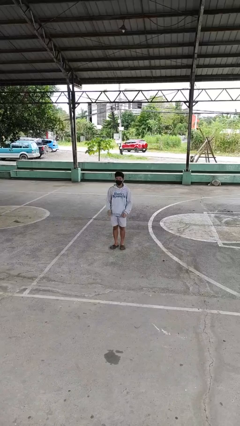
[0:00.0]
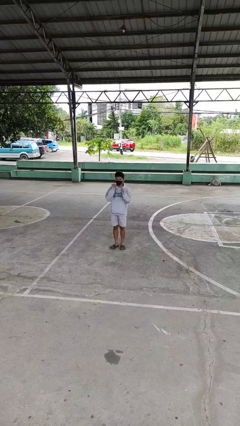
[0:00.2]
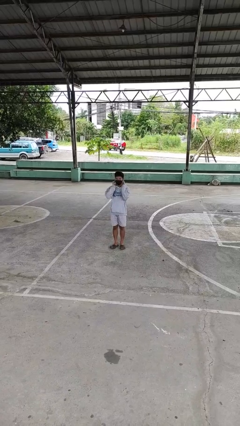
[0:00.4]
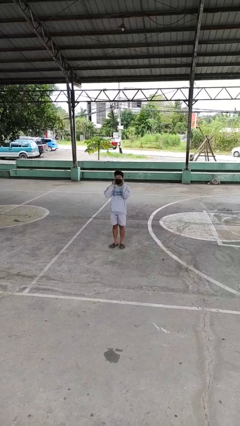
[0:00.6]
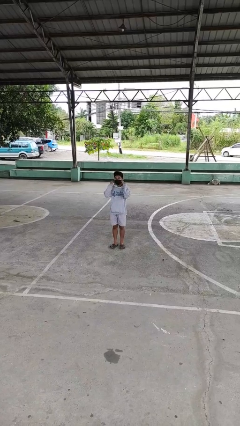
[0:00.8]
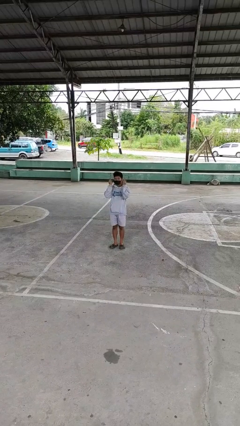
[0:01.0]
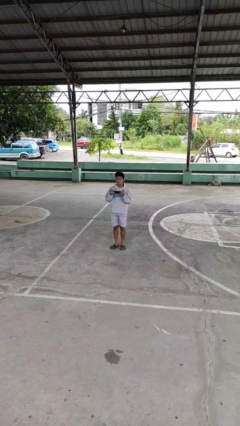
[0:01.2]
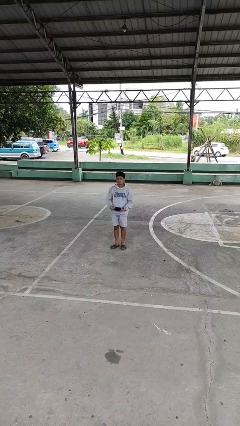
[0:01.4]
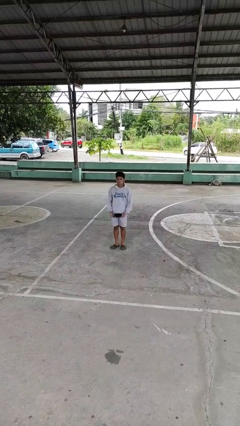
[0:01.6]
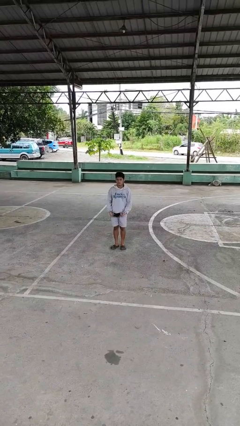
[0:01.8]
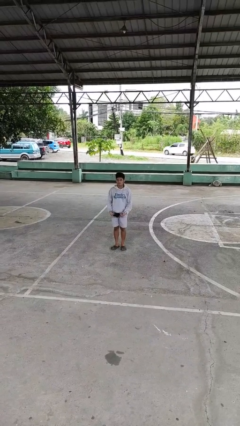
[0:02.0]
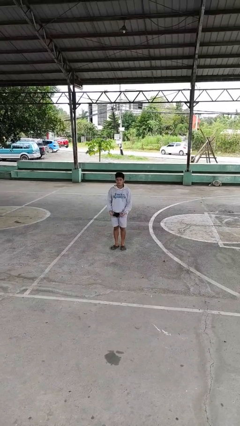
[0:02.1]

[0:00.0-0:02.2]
person takes off facemask

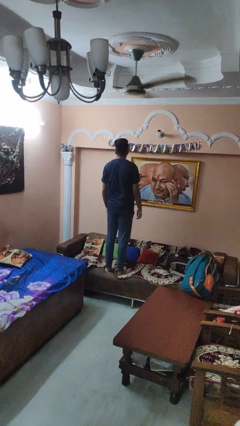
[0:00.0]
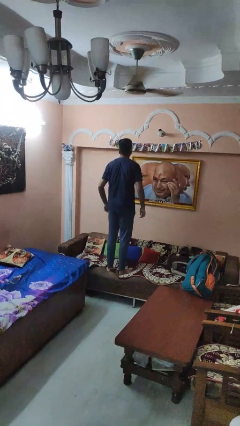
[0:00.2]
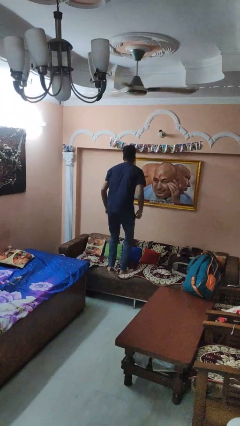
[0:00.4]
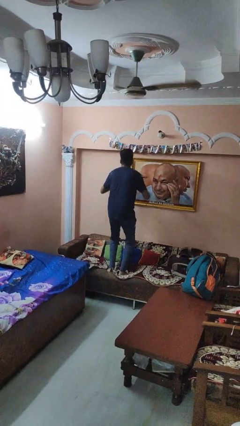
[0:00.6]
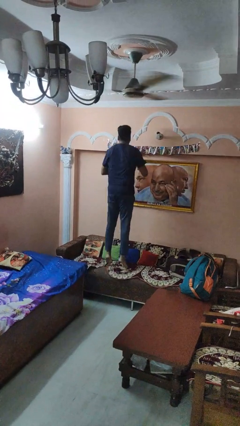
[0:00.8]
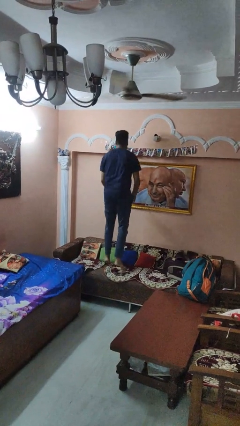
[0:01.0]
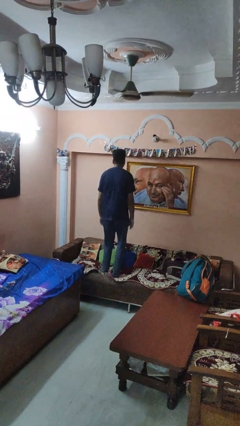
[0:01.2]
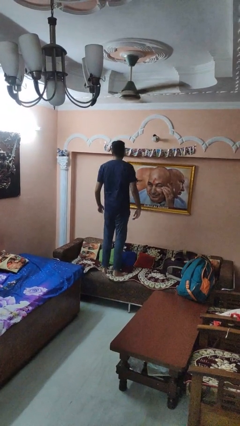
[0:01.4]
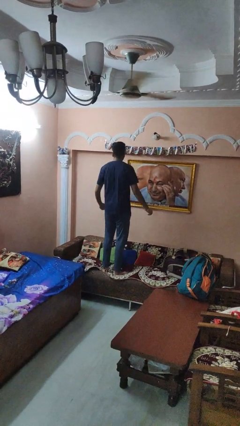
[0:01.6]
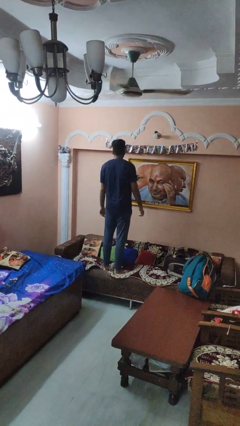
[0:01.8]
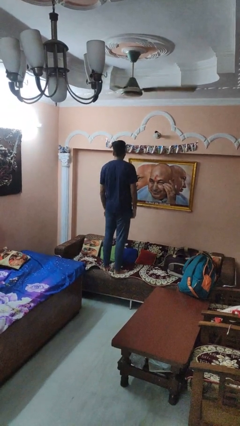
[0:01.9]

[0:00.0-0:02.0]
person jumps on couch

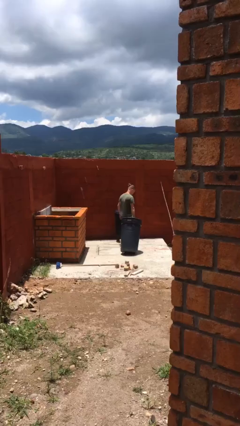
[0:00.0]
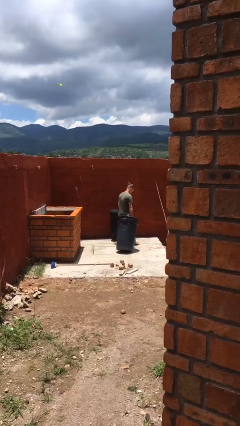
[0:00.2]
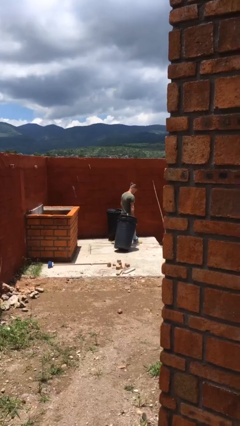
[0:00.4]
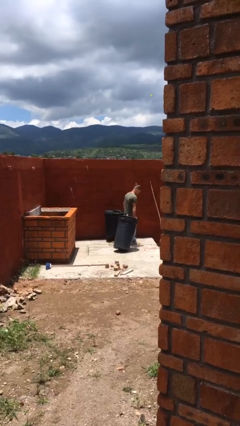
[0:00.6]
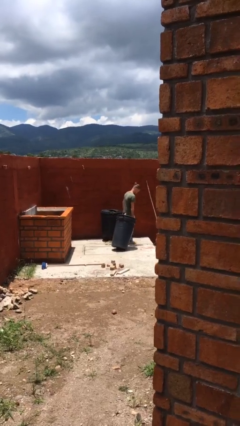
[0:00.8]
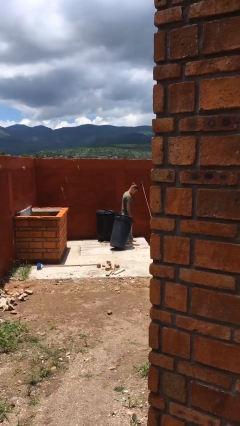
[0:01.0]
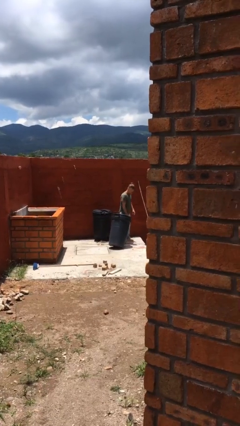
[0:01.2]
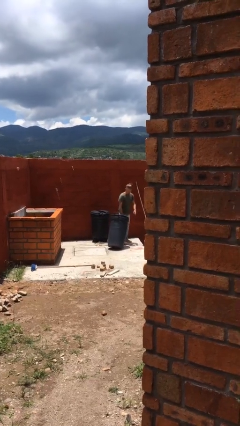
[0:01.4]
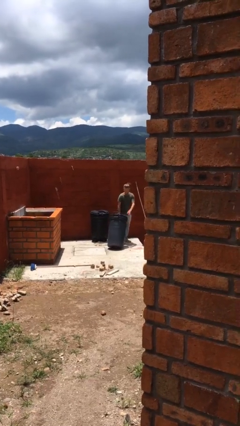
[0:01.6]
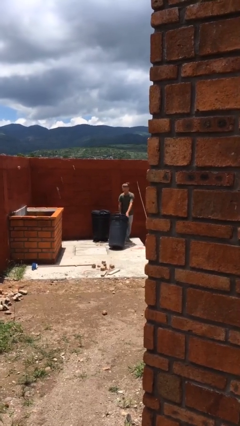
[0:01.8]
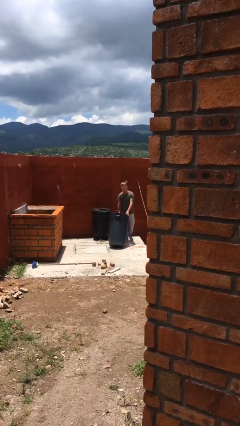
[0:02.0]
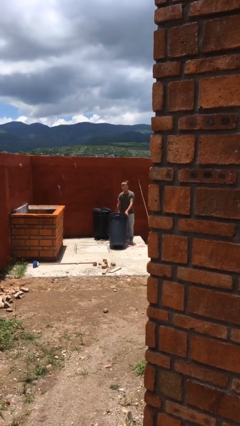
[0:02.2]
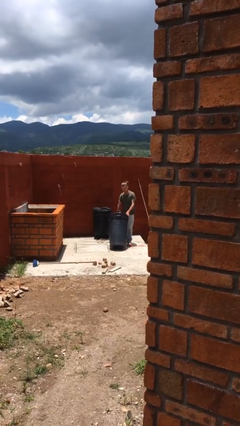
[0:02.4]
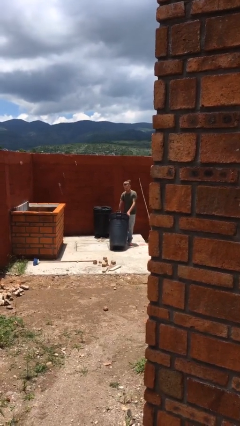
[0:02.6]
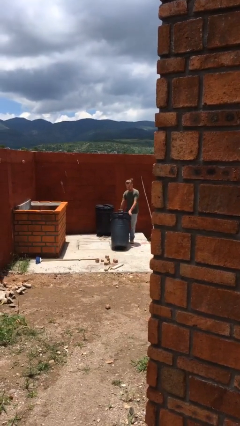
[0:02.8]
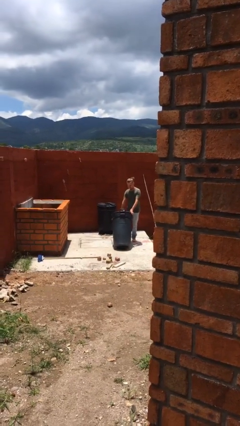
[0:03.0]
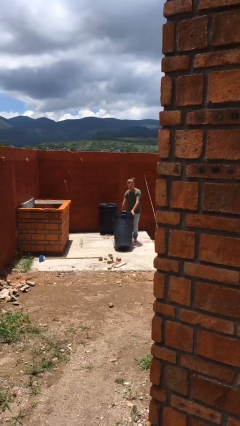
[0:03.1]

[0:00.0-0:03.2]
person pushes wheeled trashcan

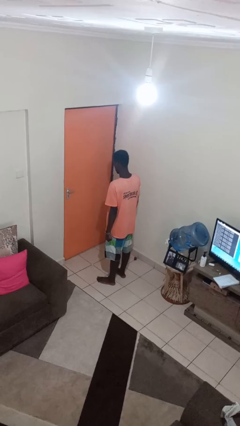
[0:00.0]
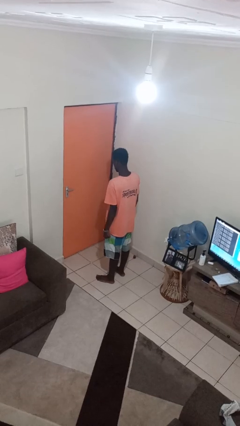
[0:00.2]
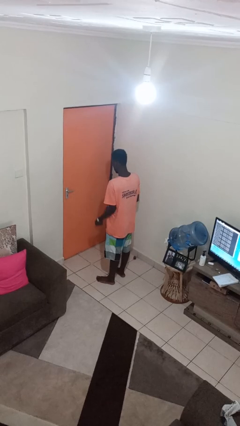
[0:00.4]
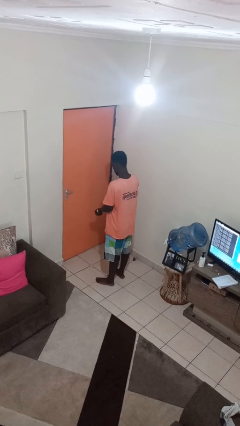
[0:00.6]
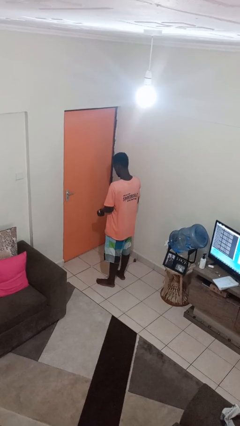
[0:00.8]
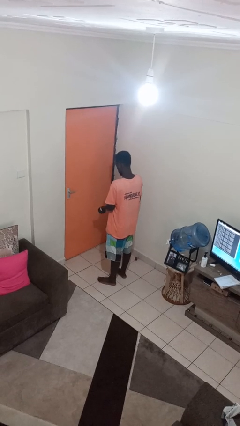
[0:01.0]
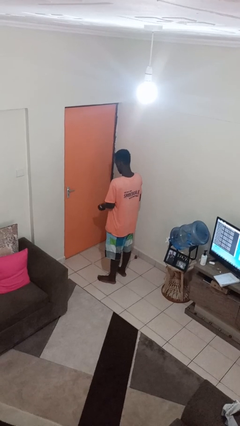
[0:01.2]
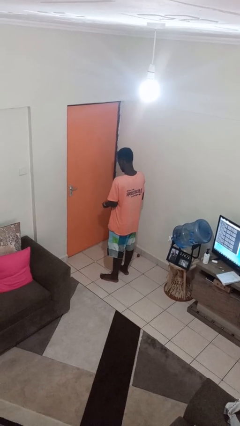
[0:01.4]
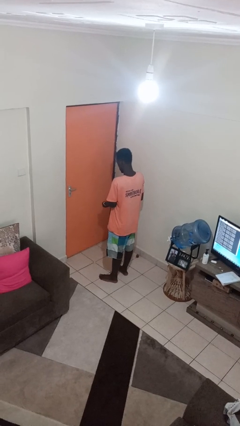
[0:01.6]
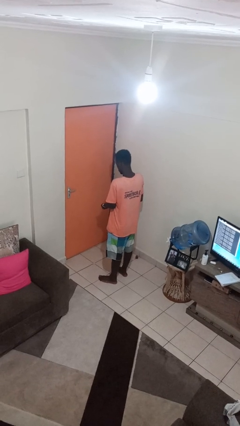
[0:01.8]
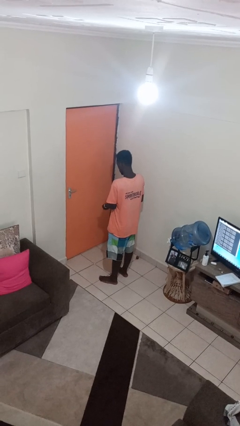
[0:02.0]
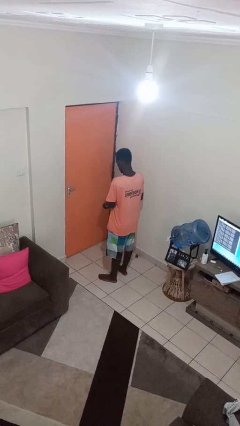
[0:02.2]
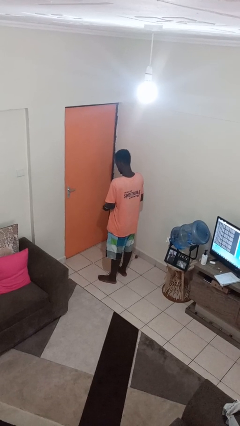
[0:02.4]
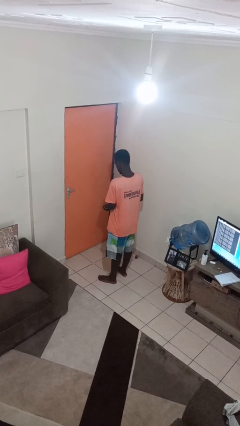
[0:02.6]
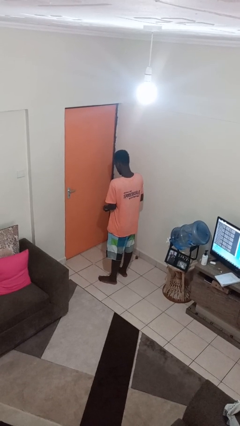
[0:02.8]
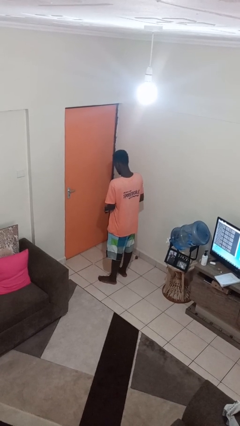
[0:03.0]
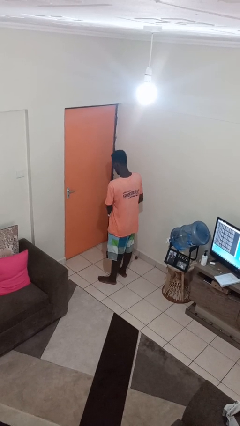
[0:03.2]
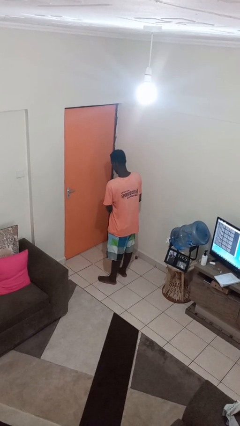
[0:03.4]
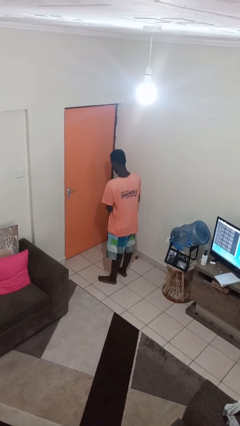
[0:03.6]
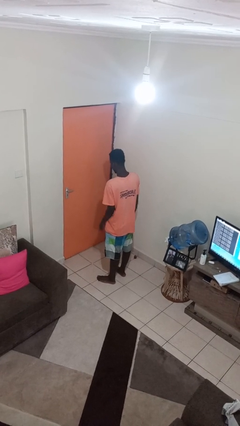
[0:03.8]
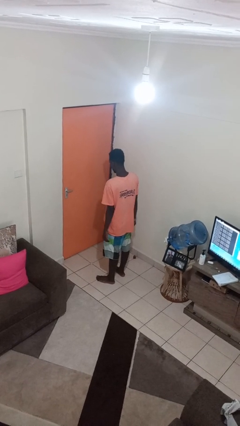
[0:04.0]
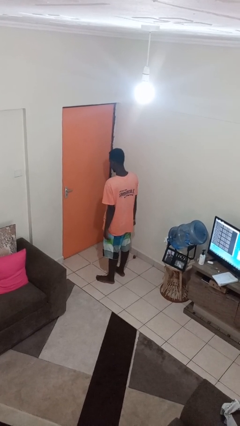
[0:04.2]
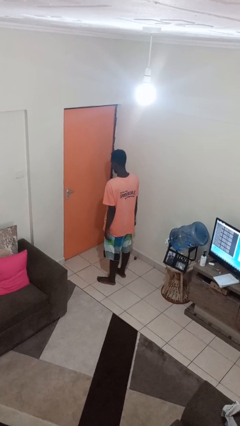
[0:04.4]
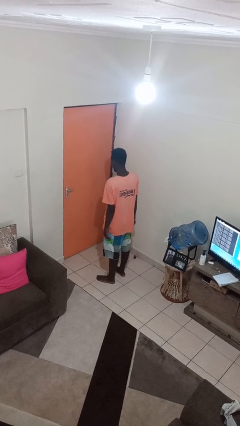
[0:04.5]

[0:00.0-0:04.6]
person takes off wristwatch

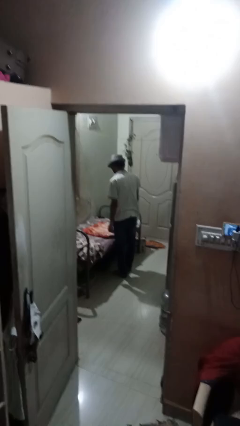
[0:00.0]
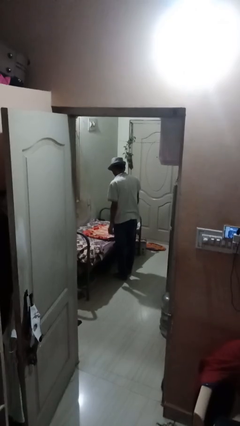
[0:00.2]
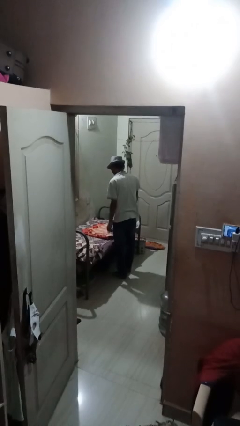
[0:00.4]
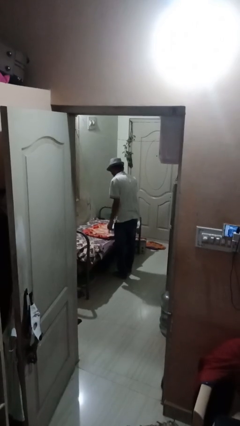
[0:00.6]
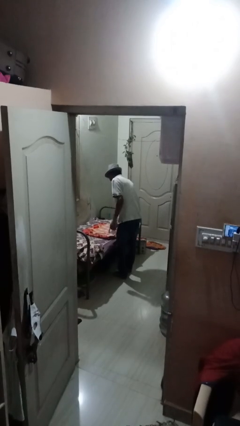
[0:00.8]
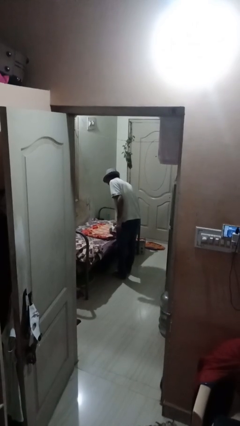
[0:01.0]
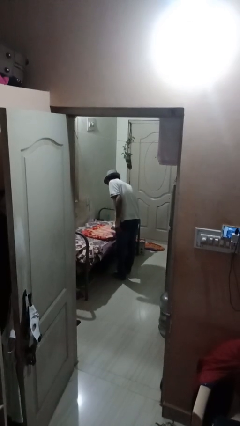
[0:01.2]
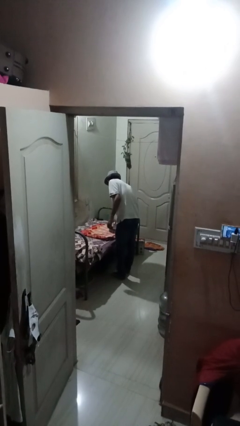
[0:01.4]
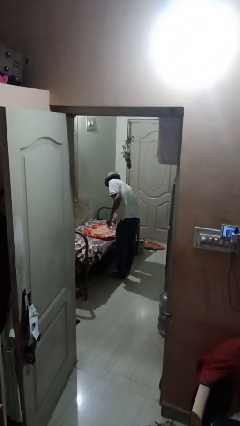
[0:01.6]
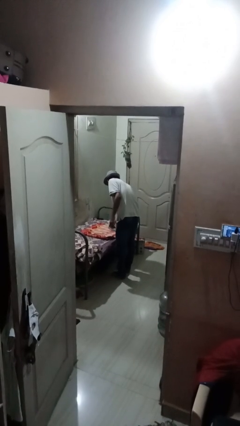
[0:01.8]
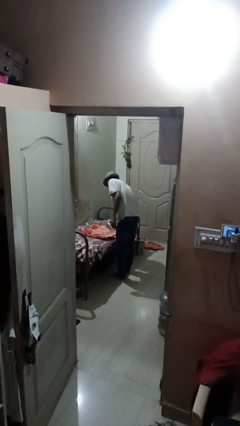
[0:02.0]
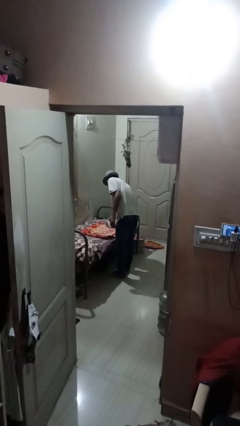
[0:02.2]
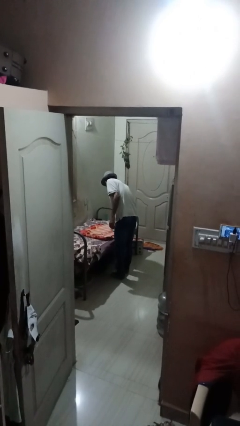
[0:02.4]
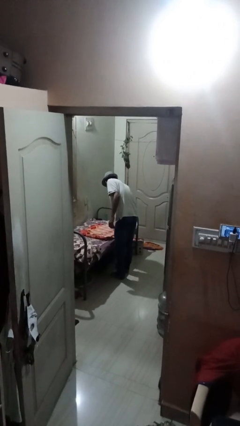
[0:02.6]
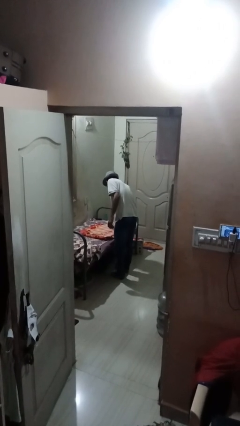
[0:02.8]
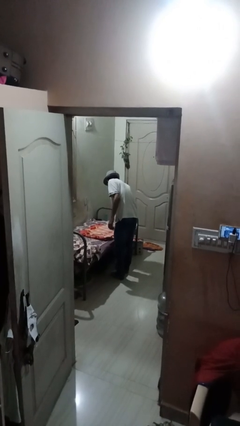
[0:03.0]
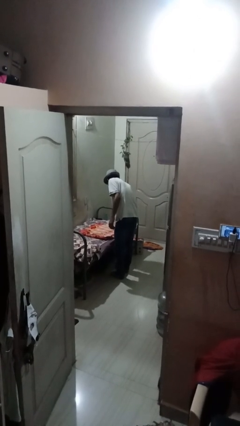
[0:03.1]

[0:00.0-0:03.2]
person irons clothes

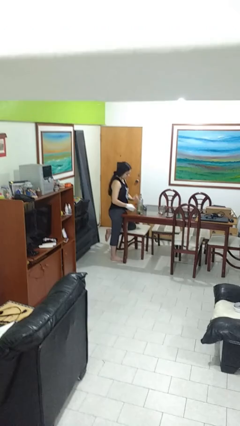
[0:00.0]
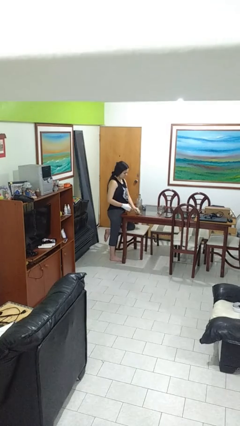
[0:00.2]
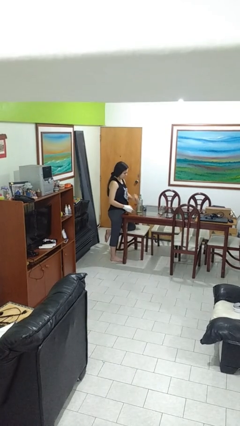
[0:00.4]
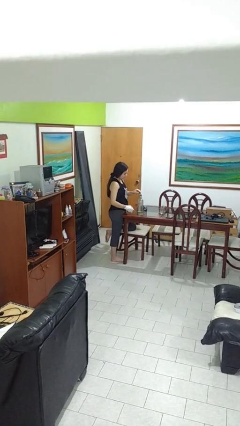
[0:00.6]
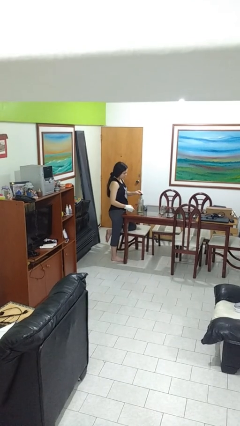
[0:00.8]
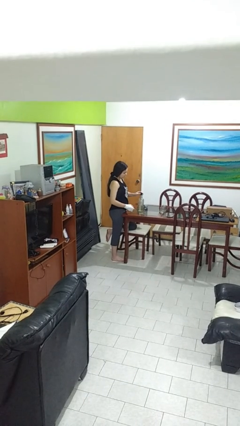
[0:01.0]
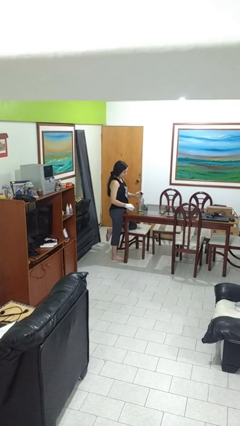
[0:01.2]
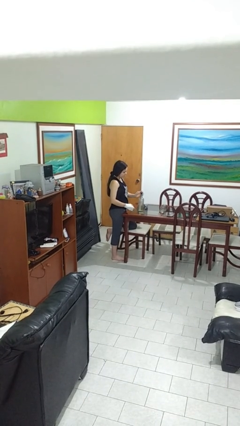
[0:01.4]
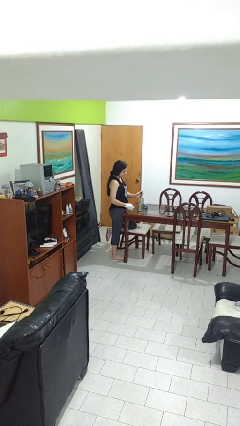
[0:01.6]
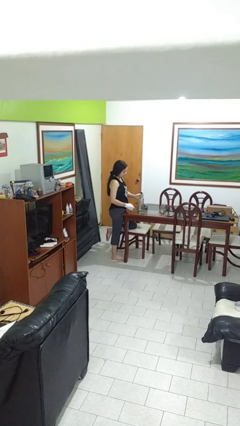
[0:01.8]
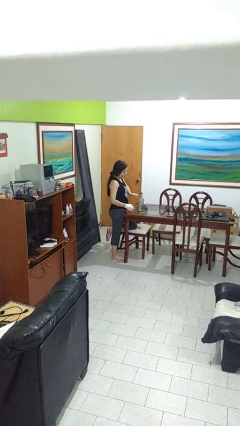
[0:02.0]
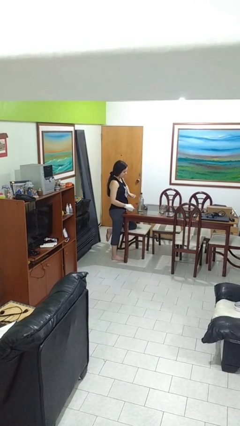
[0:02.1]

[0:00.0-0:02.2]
person screws lid to bottle
